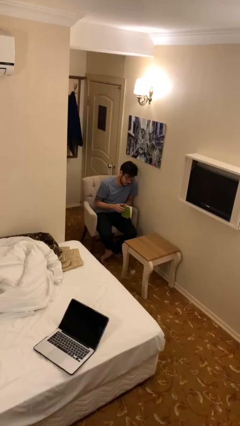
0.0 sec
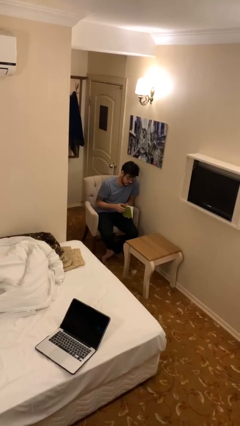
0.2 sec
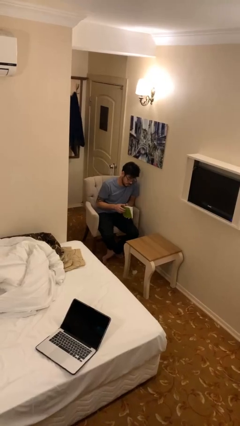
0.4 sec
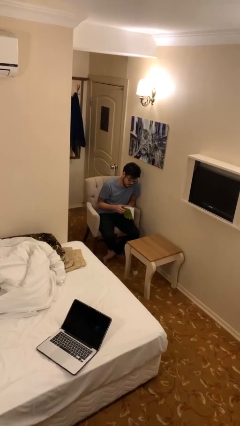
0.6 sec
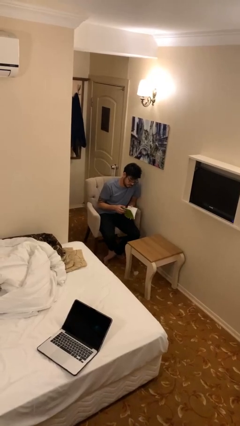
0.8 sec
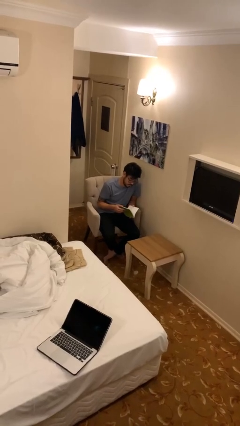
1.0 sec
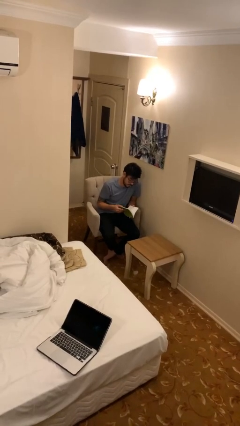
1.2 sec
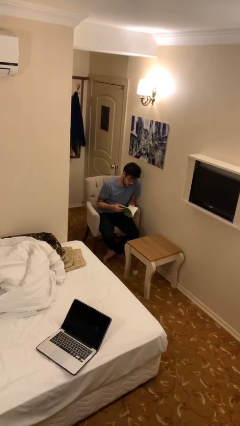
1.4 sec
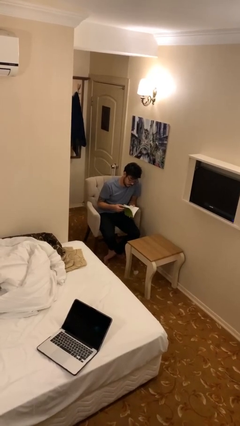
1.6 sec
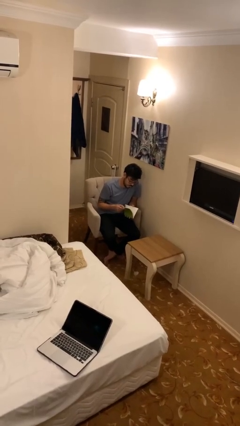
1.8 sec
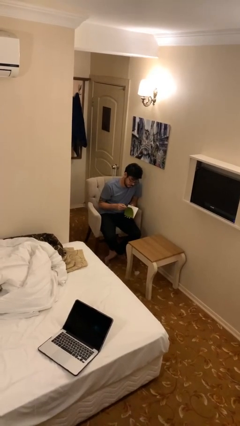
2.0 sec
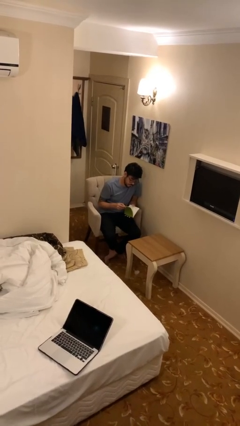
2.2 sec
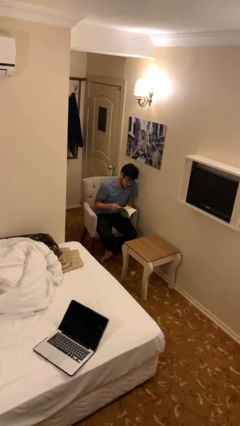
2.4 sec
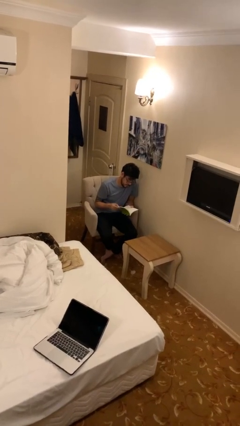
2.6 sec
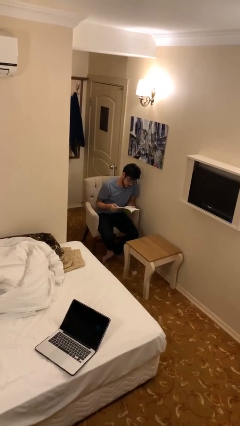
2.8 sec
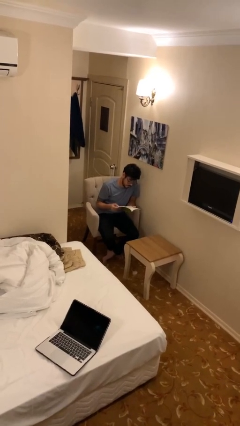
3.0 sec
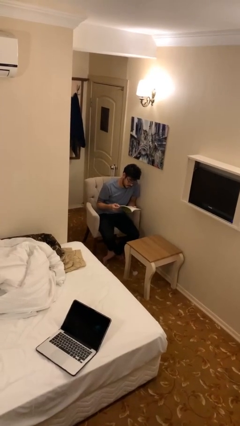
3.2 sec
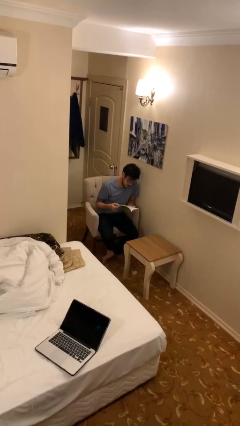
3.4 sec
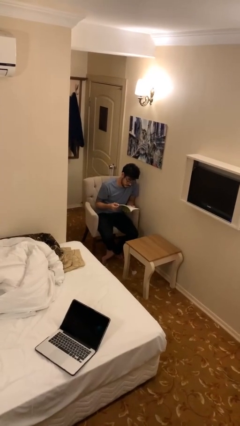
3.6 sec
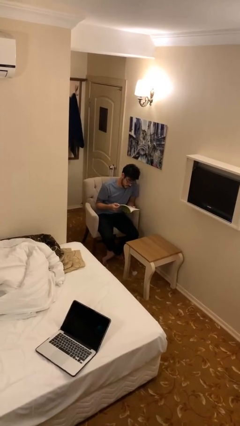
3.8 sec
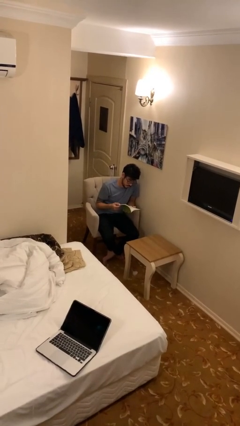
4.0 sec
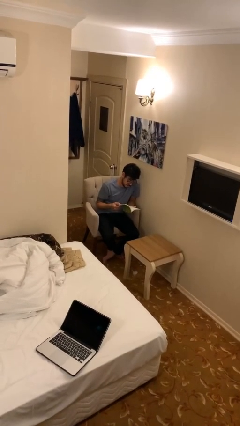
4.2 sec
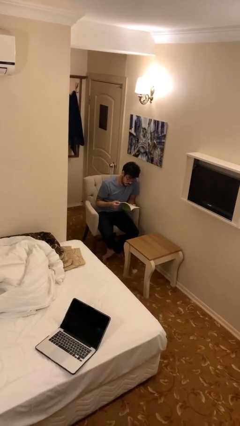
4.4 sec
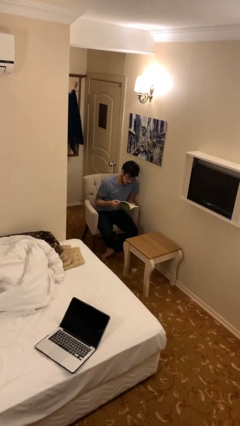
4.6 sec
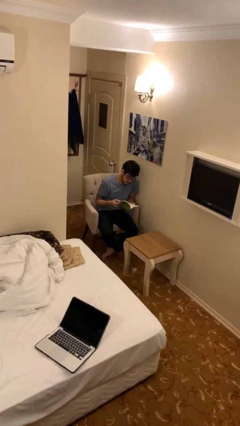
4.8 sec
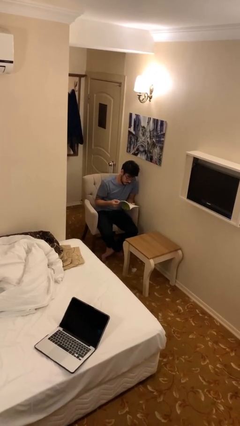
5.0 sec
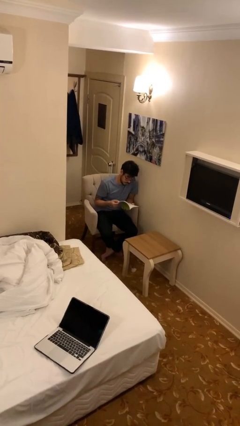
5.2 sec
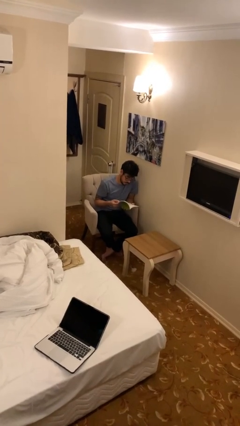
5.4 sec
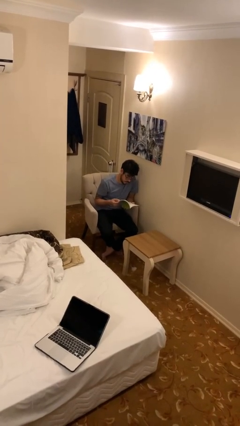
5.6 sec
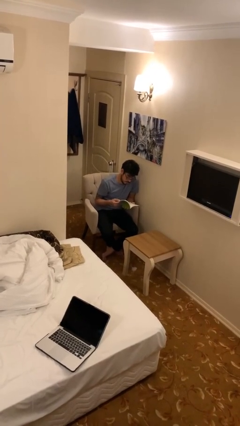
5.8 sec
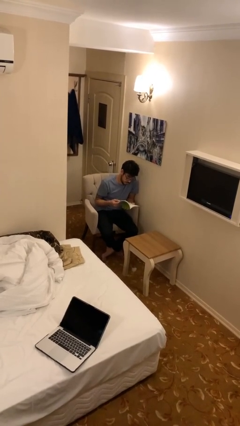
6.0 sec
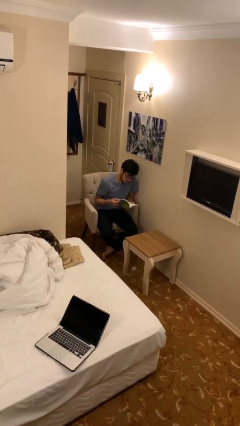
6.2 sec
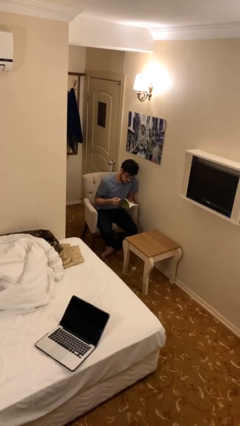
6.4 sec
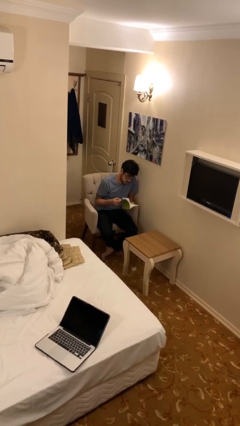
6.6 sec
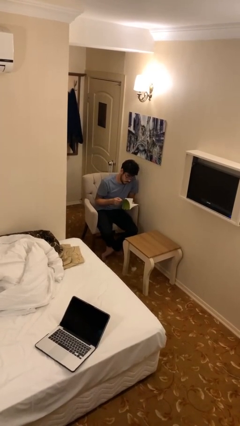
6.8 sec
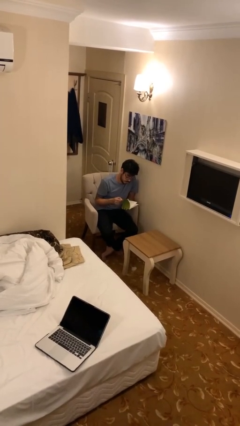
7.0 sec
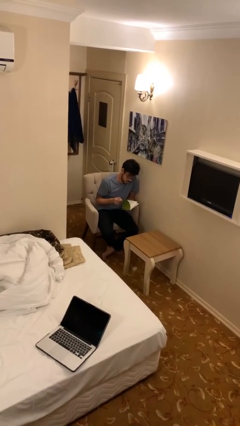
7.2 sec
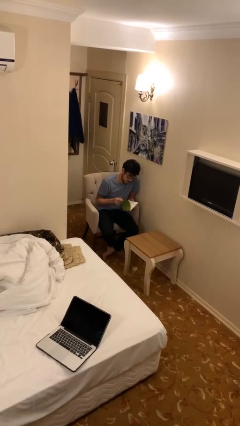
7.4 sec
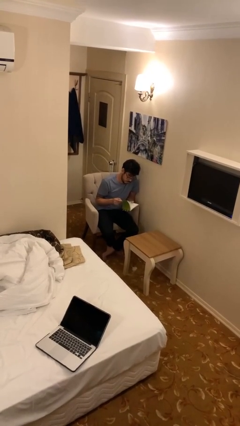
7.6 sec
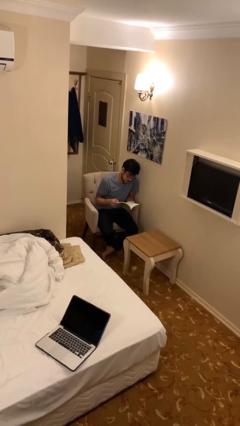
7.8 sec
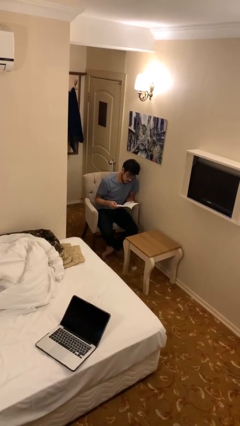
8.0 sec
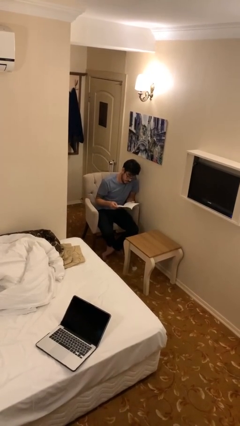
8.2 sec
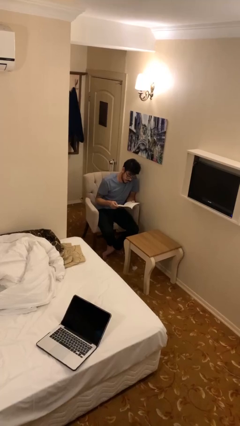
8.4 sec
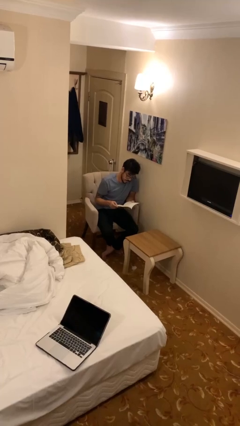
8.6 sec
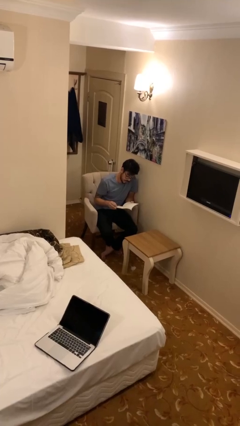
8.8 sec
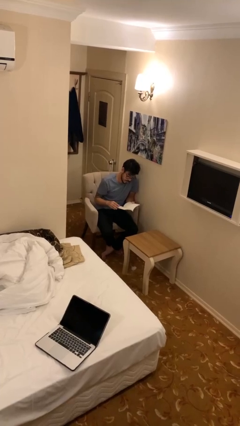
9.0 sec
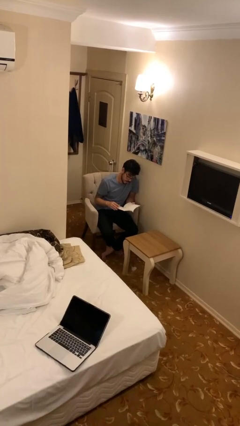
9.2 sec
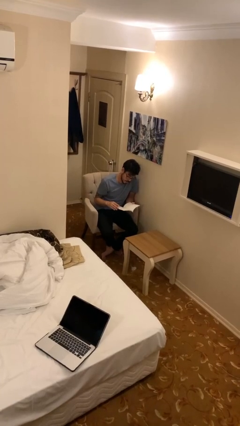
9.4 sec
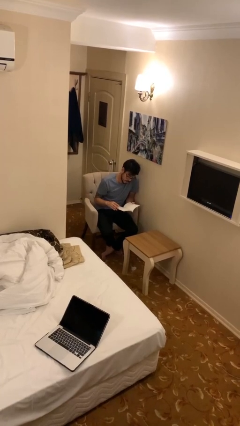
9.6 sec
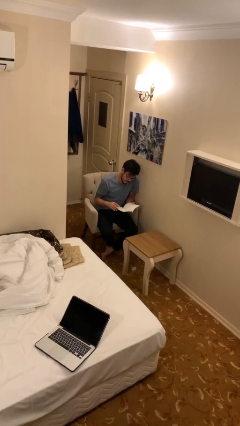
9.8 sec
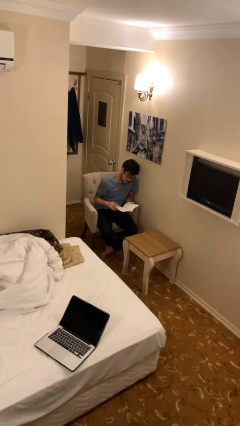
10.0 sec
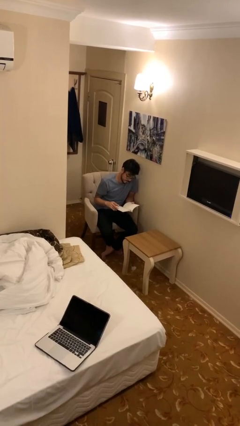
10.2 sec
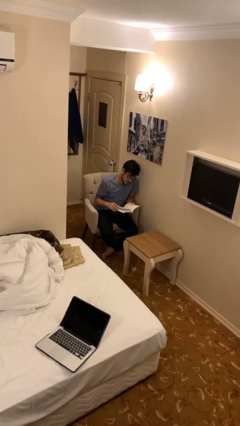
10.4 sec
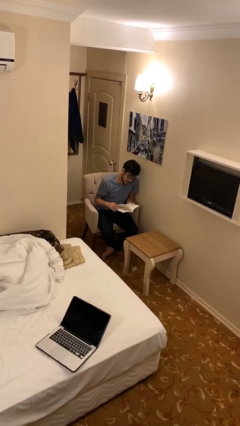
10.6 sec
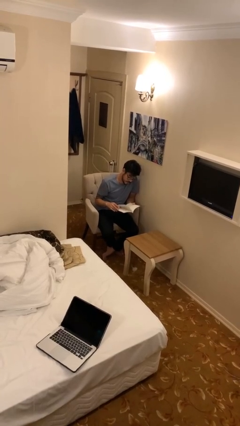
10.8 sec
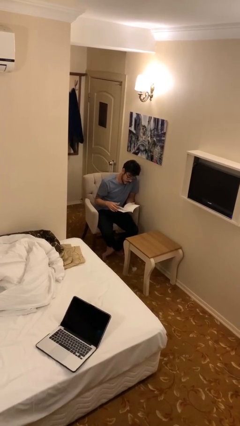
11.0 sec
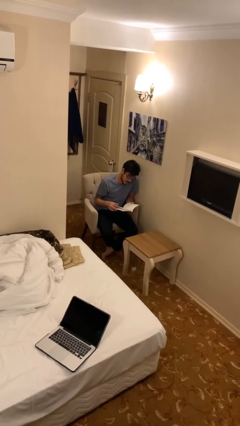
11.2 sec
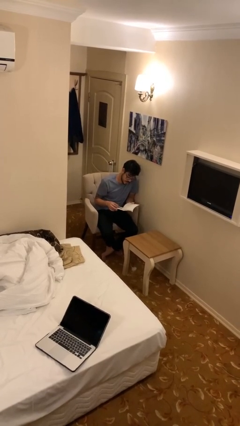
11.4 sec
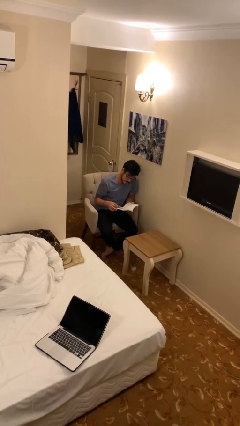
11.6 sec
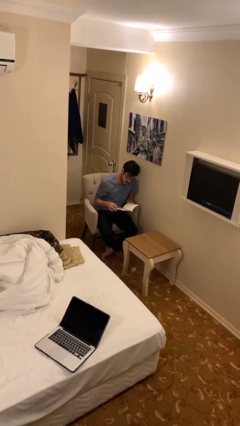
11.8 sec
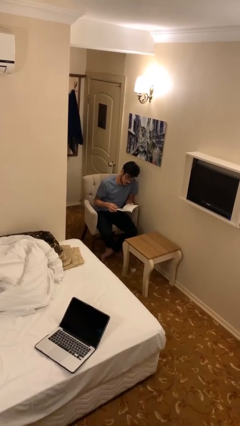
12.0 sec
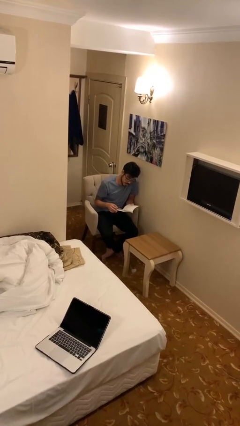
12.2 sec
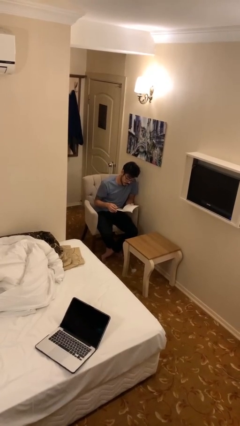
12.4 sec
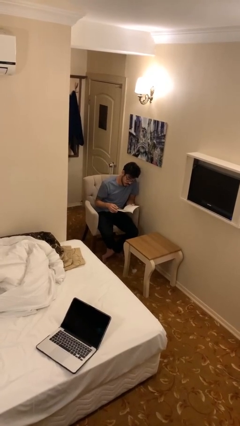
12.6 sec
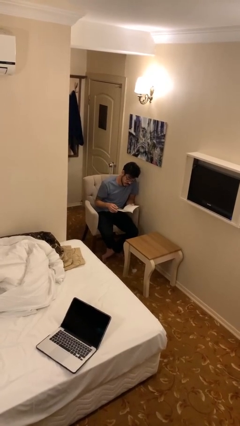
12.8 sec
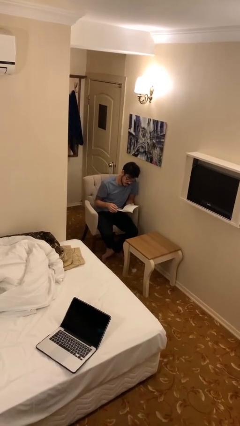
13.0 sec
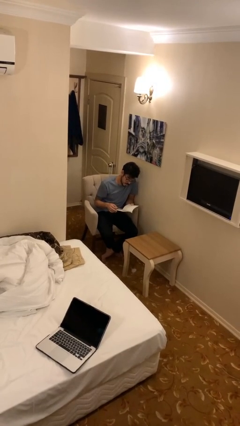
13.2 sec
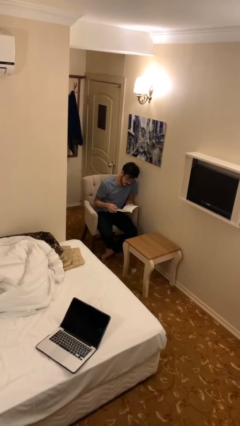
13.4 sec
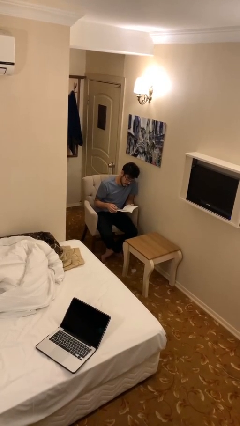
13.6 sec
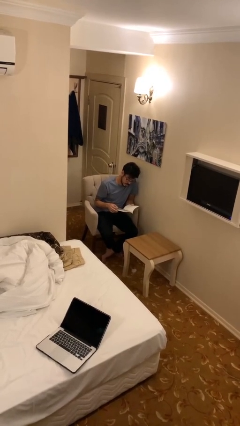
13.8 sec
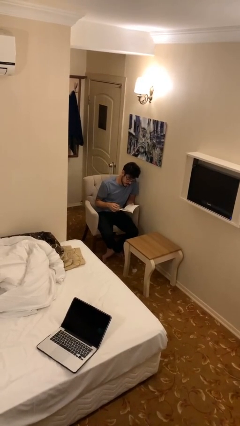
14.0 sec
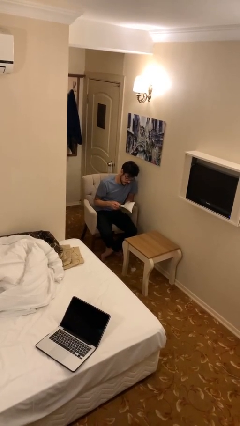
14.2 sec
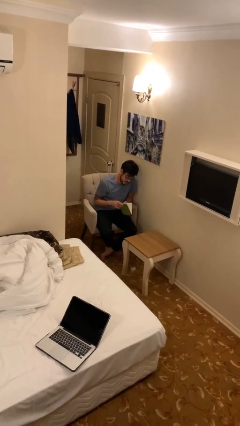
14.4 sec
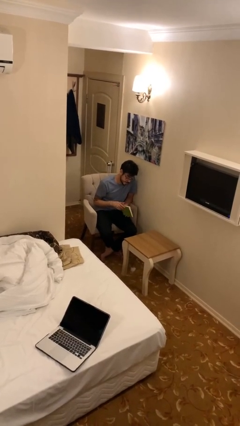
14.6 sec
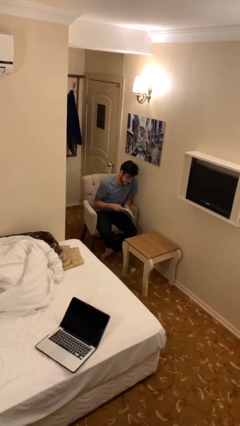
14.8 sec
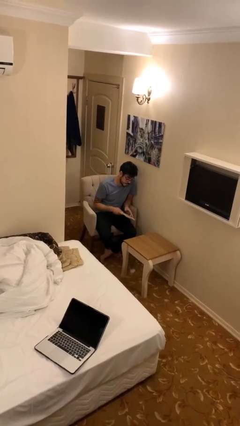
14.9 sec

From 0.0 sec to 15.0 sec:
person reads document

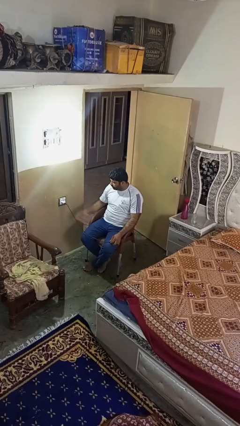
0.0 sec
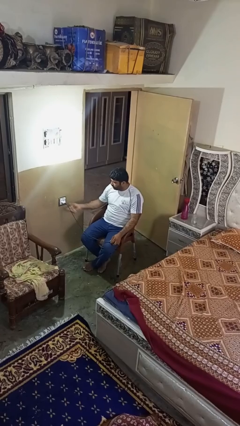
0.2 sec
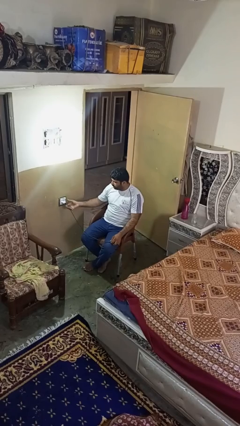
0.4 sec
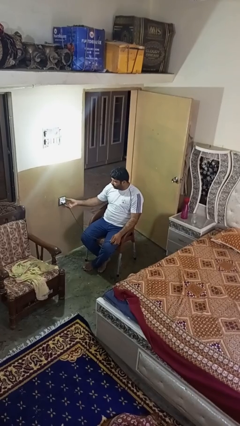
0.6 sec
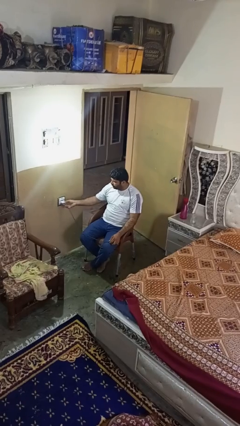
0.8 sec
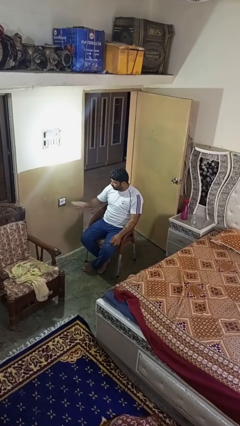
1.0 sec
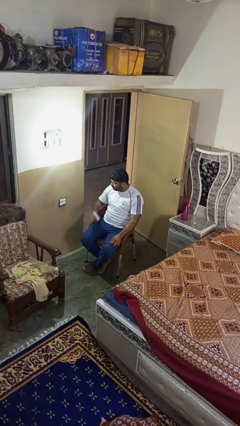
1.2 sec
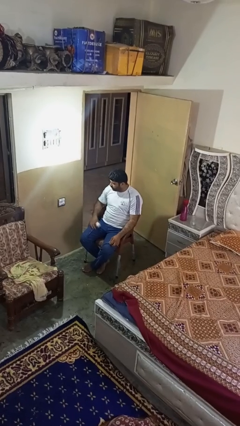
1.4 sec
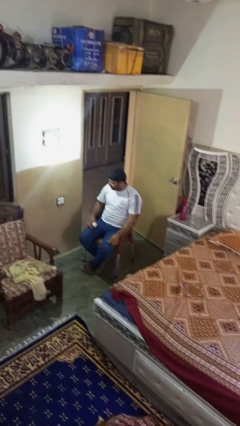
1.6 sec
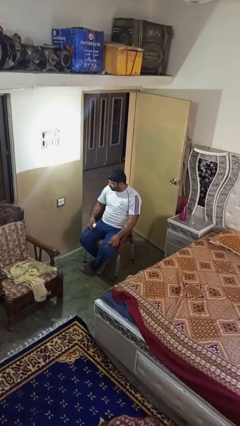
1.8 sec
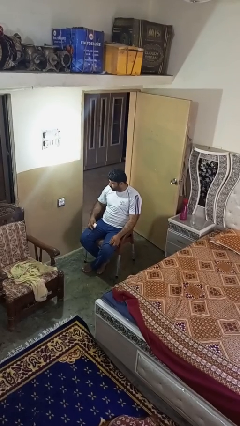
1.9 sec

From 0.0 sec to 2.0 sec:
person unplugs from electrical socket

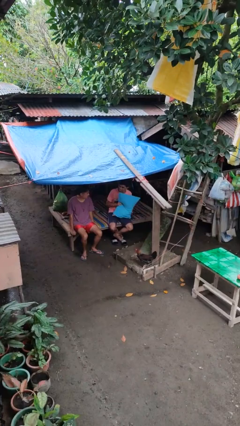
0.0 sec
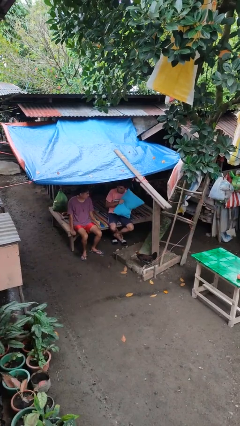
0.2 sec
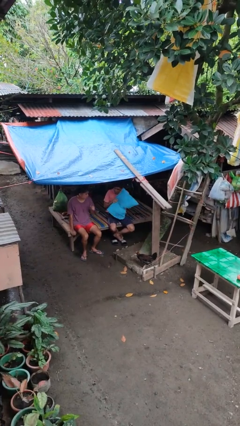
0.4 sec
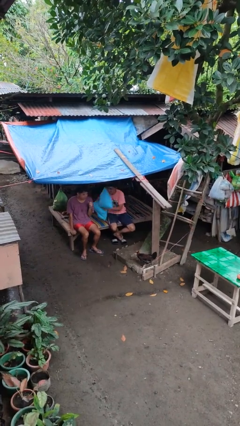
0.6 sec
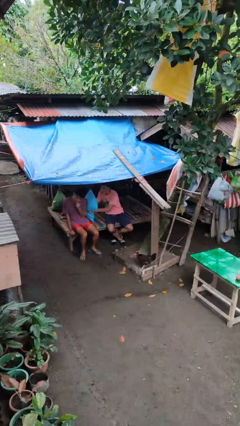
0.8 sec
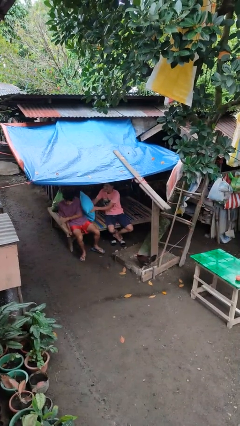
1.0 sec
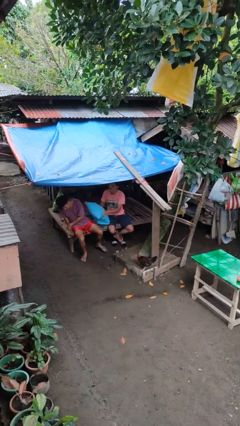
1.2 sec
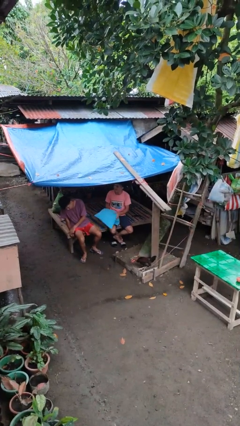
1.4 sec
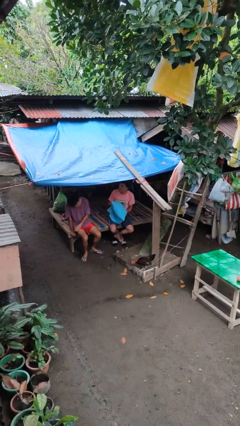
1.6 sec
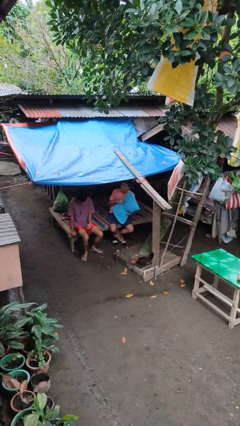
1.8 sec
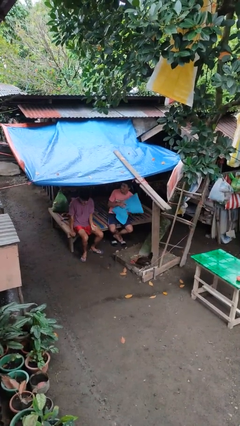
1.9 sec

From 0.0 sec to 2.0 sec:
person hits person with pillow
